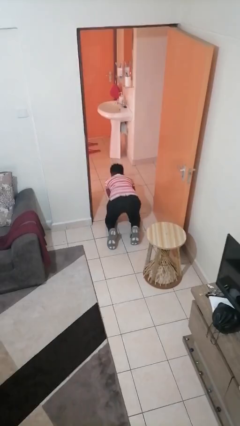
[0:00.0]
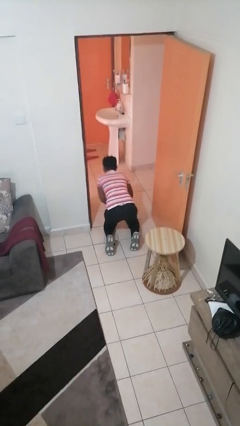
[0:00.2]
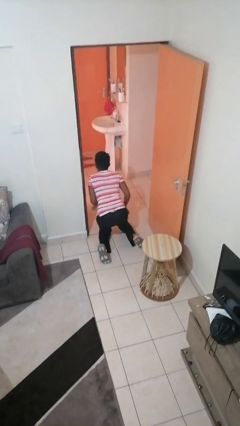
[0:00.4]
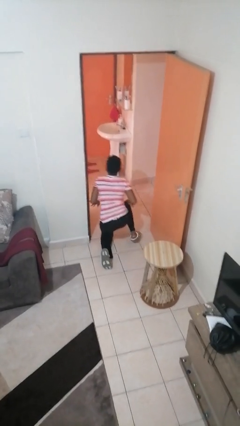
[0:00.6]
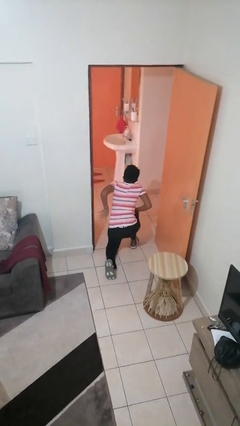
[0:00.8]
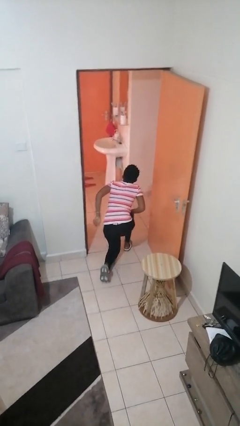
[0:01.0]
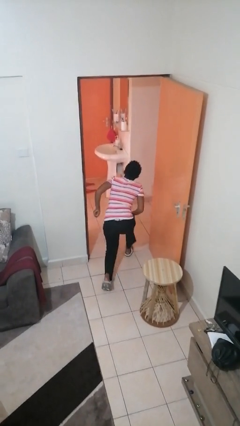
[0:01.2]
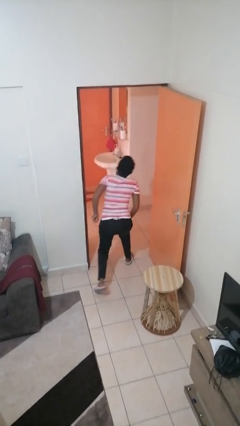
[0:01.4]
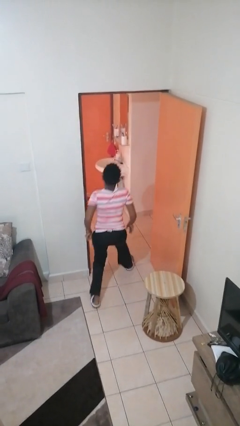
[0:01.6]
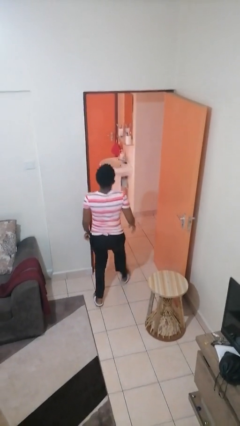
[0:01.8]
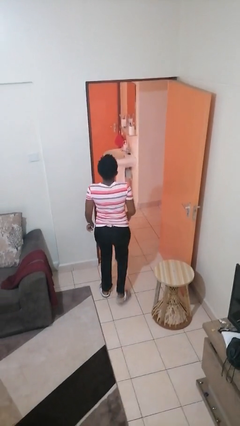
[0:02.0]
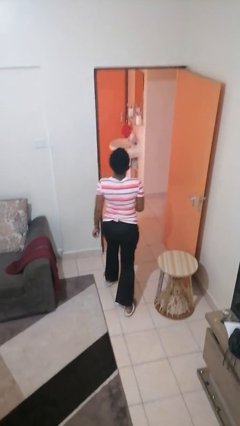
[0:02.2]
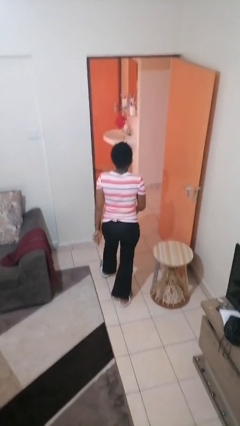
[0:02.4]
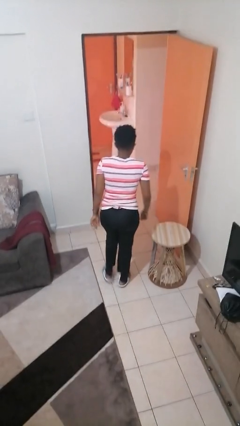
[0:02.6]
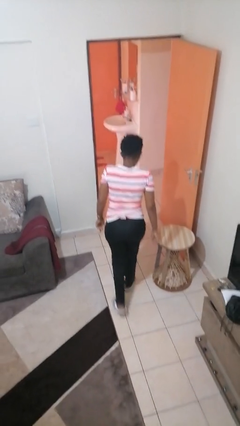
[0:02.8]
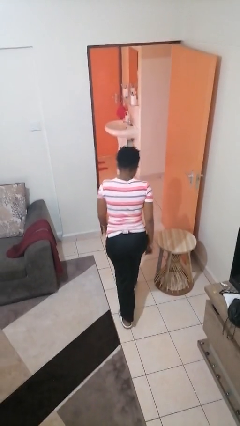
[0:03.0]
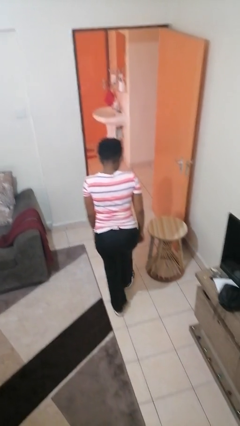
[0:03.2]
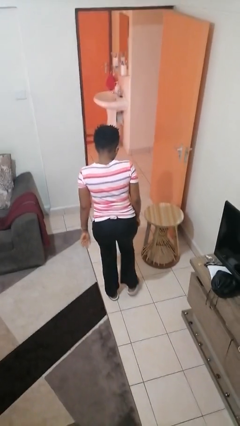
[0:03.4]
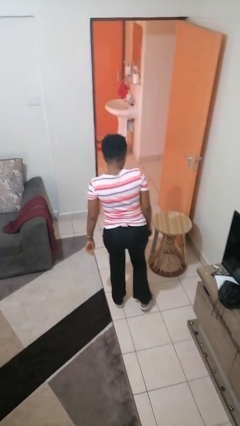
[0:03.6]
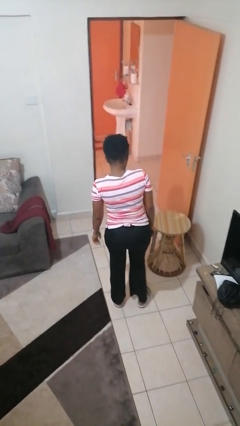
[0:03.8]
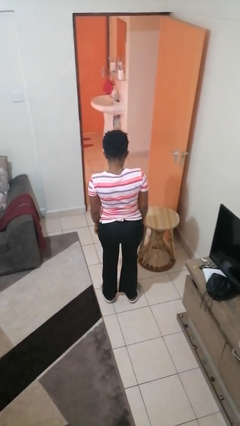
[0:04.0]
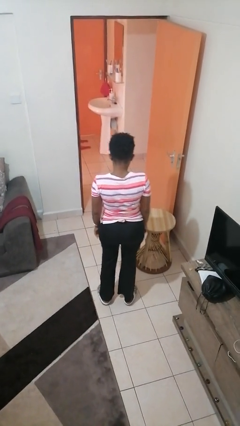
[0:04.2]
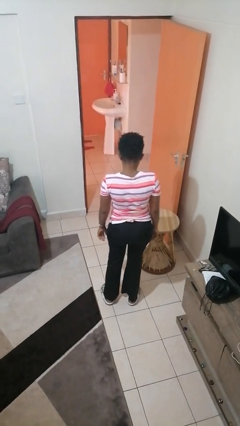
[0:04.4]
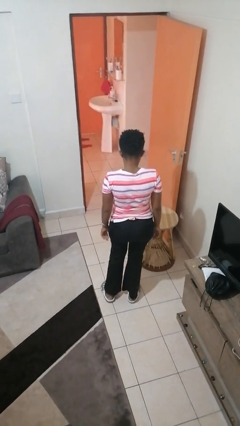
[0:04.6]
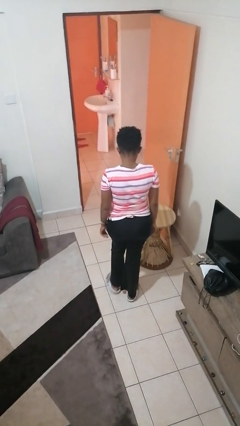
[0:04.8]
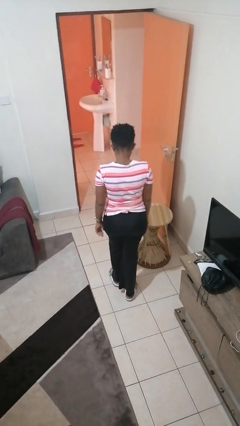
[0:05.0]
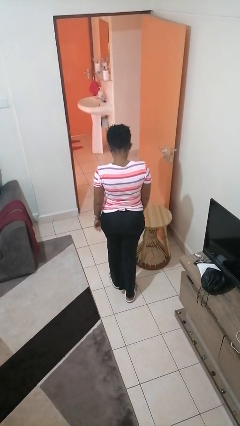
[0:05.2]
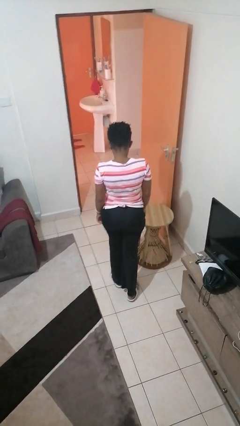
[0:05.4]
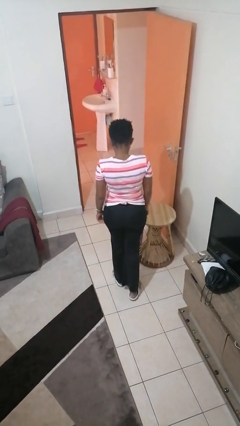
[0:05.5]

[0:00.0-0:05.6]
person stands up from floor

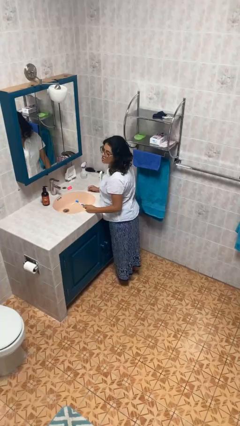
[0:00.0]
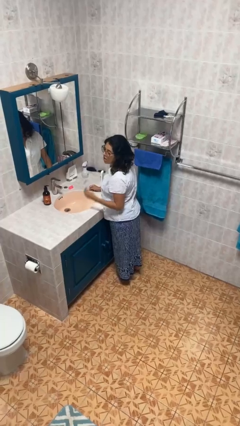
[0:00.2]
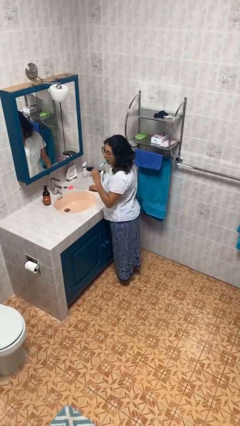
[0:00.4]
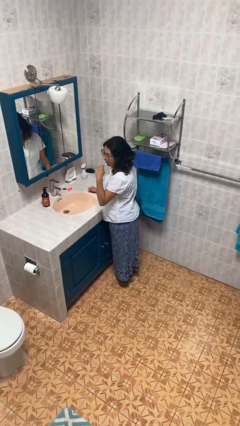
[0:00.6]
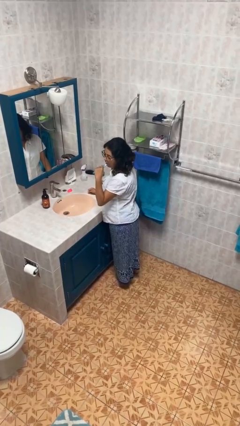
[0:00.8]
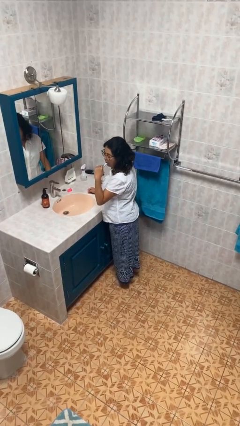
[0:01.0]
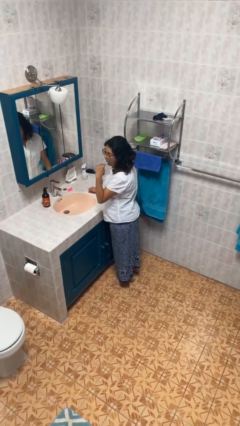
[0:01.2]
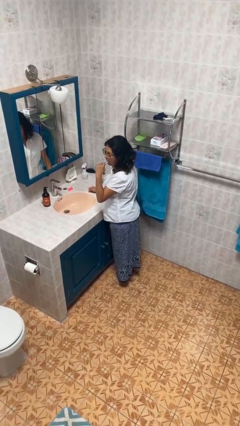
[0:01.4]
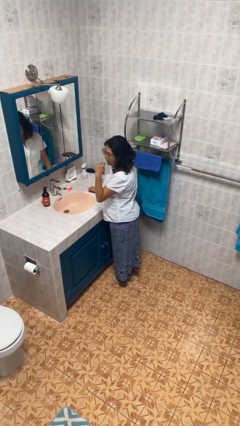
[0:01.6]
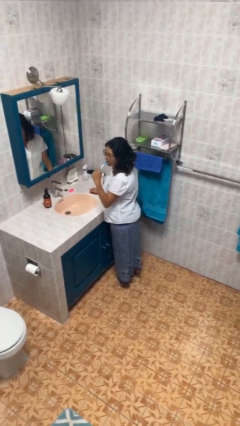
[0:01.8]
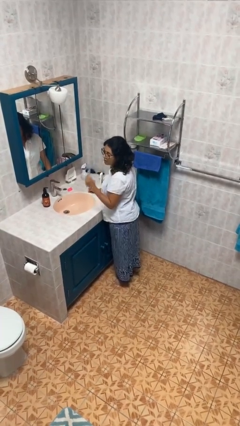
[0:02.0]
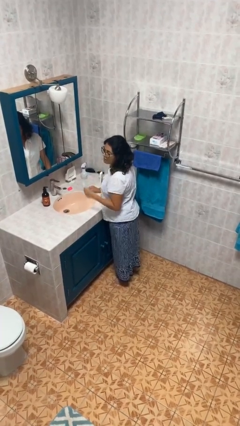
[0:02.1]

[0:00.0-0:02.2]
person brushes teeth

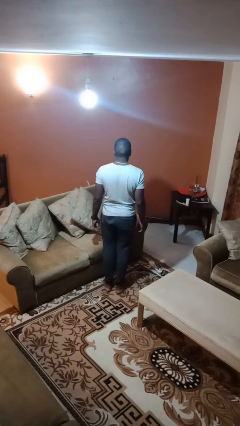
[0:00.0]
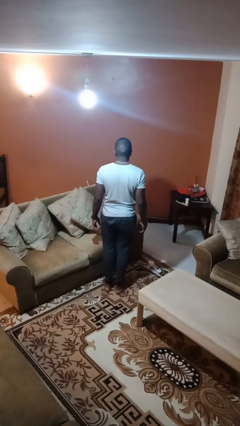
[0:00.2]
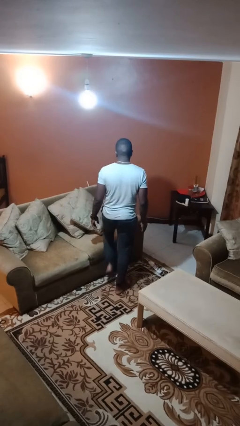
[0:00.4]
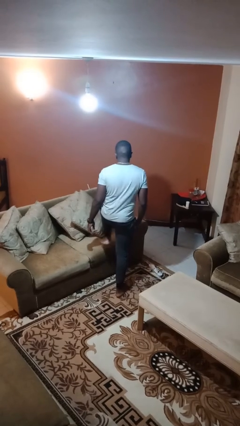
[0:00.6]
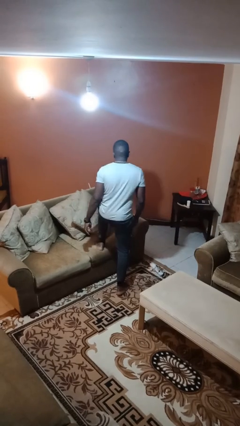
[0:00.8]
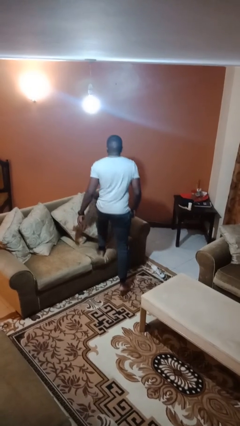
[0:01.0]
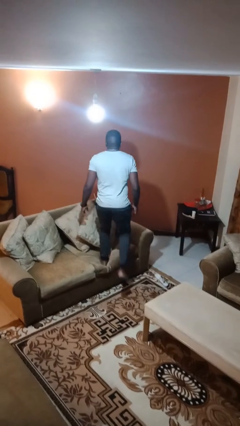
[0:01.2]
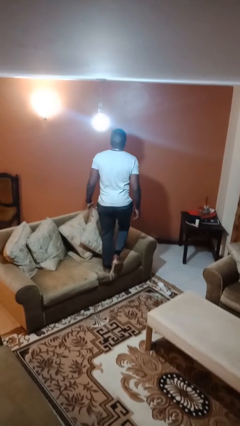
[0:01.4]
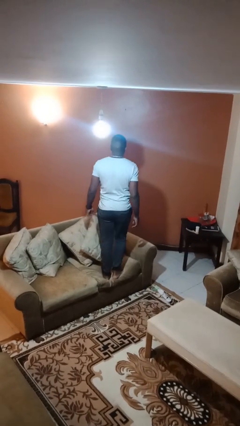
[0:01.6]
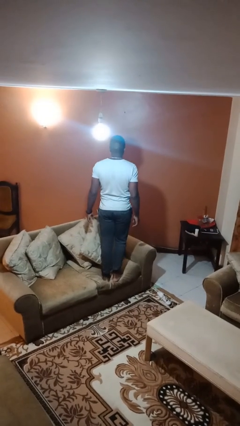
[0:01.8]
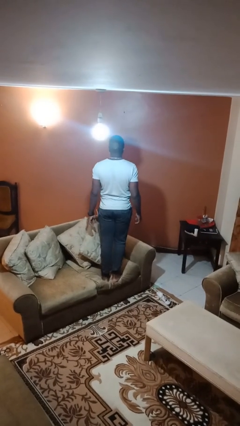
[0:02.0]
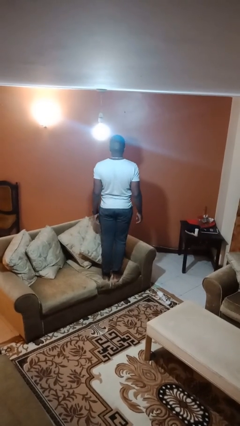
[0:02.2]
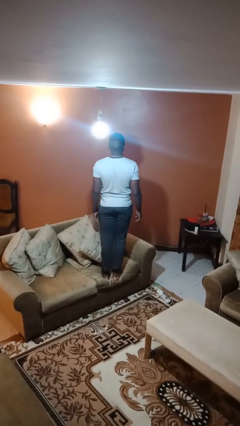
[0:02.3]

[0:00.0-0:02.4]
person climbs on couch

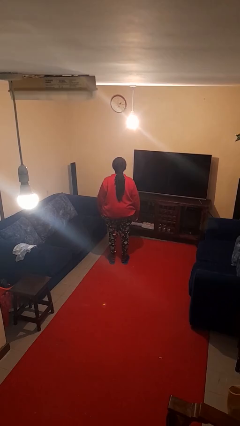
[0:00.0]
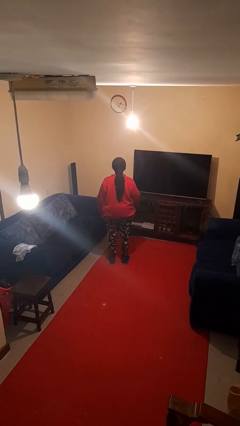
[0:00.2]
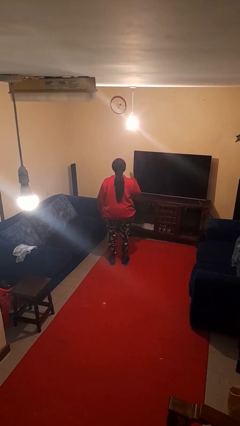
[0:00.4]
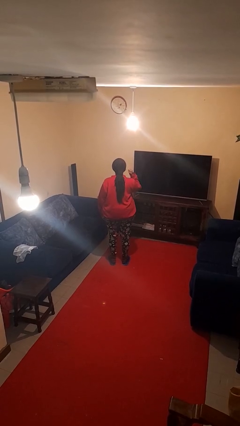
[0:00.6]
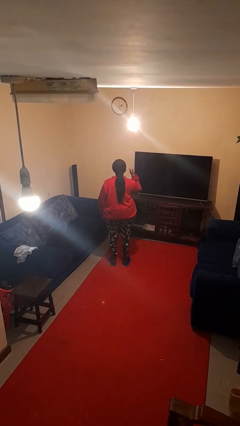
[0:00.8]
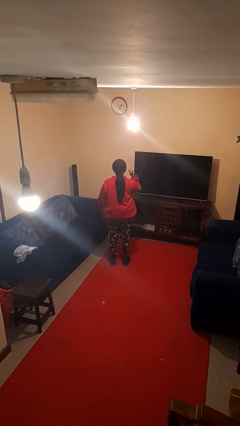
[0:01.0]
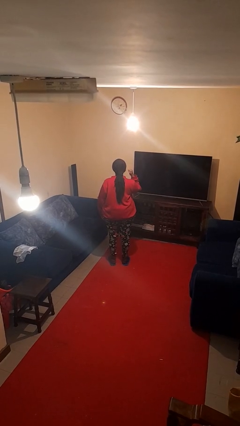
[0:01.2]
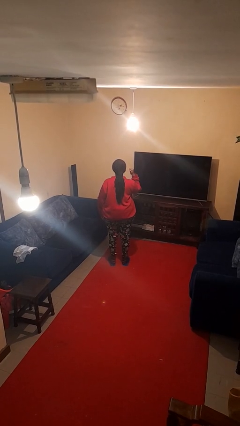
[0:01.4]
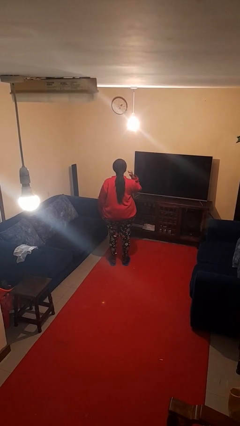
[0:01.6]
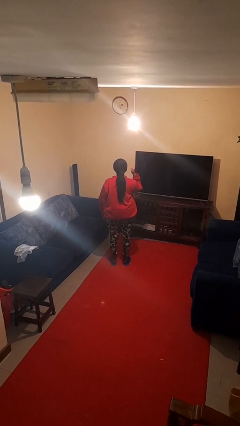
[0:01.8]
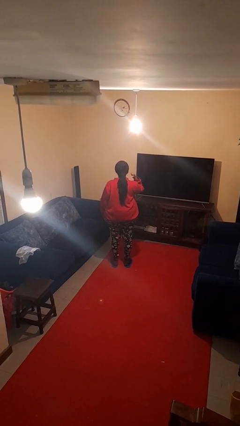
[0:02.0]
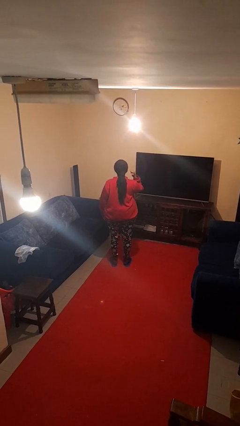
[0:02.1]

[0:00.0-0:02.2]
person gestures behind me

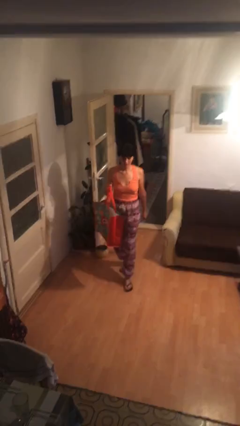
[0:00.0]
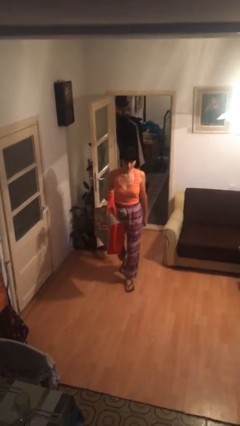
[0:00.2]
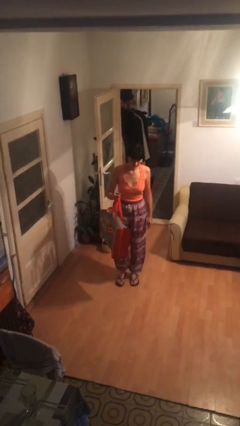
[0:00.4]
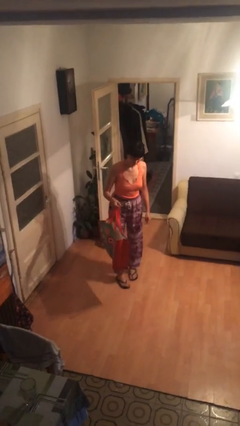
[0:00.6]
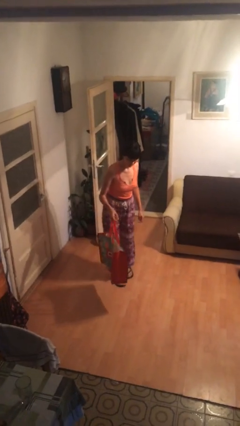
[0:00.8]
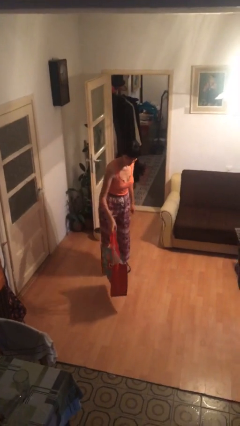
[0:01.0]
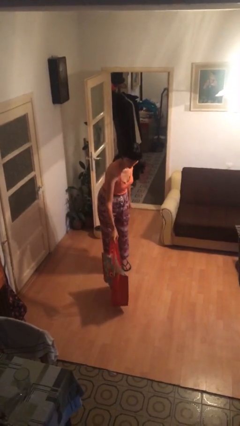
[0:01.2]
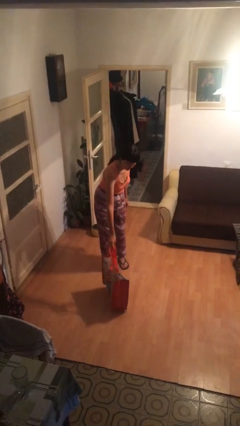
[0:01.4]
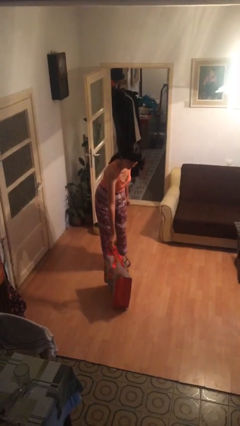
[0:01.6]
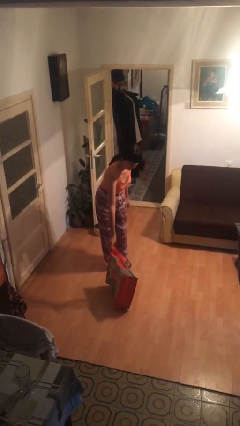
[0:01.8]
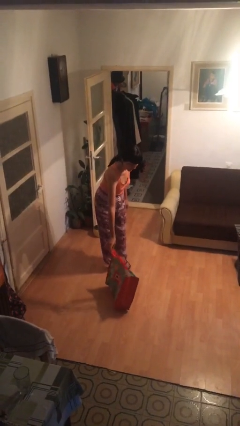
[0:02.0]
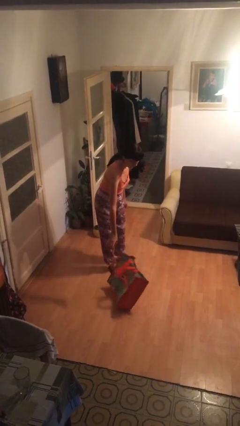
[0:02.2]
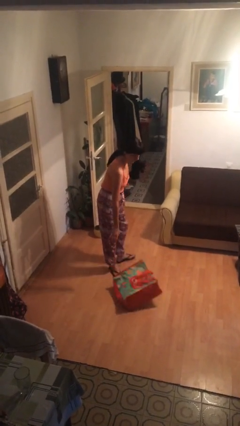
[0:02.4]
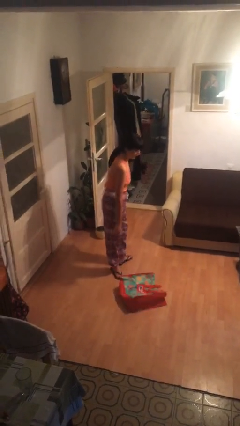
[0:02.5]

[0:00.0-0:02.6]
person puts down object on floor

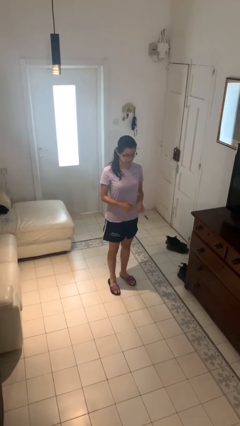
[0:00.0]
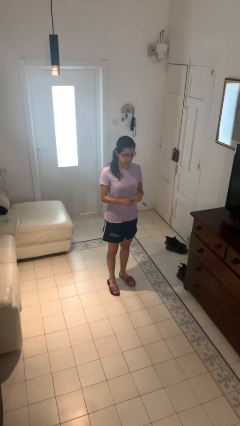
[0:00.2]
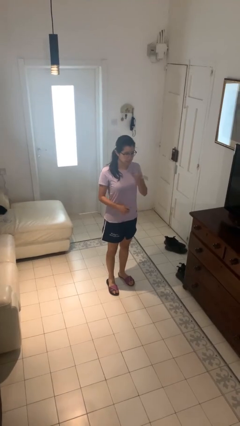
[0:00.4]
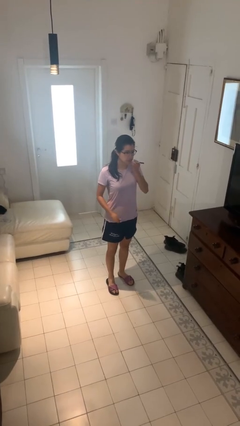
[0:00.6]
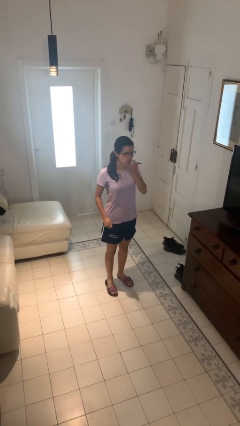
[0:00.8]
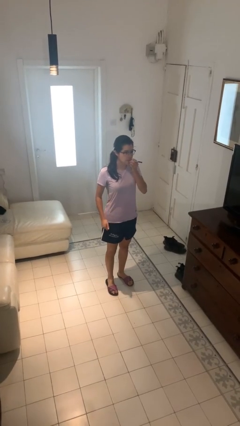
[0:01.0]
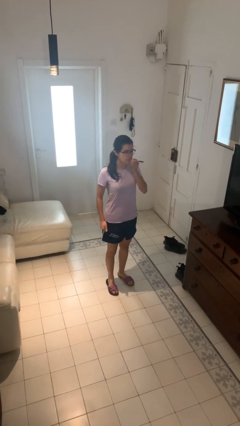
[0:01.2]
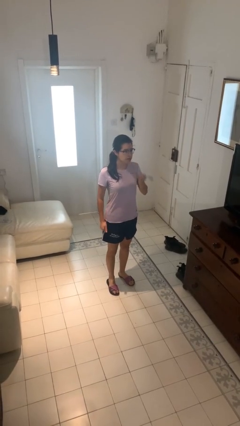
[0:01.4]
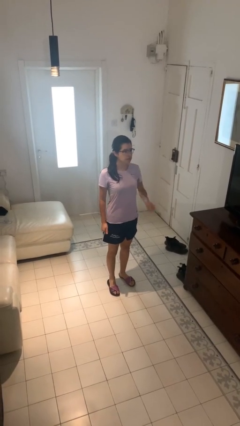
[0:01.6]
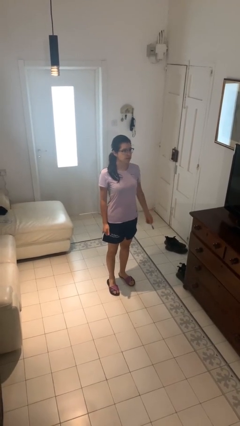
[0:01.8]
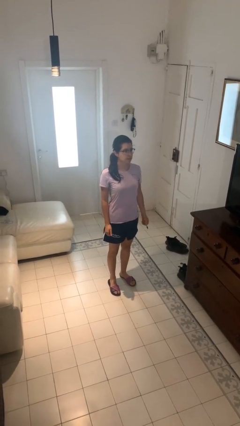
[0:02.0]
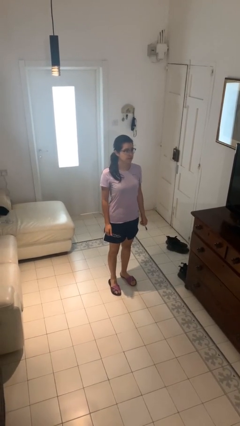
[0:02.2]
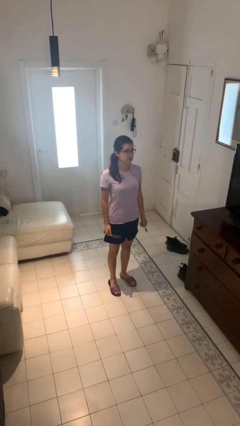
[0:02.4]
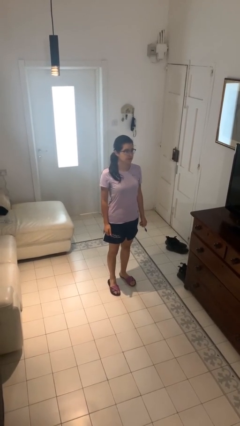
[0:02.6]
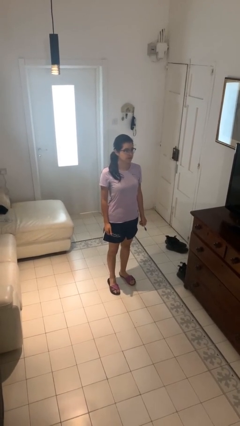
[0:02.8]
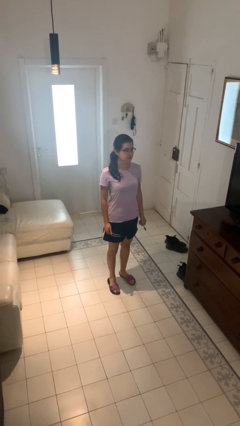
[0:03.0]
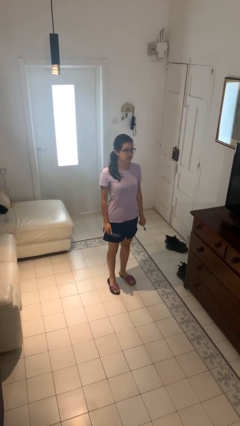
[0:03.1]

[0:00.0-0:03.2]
person vapes
